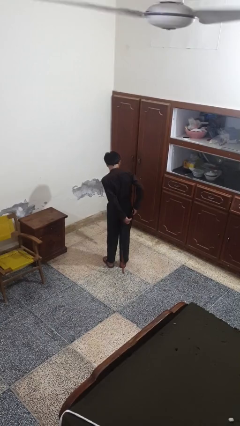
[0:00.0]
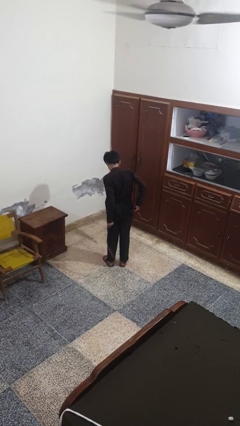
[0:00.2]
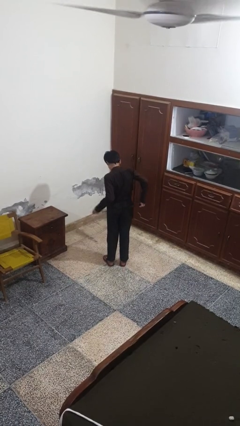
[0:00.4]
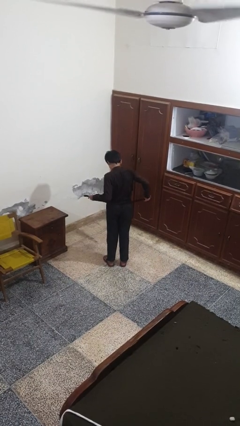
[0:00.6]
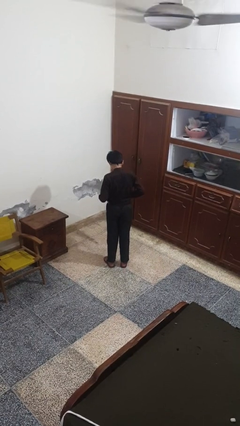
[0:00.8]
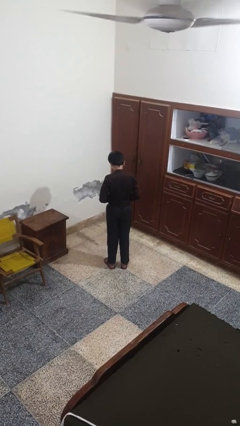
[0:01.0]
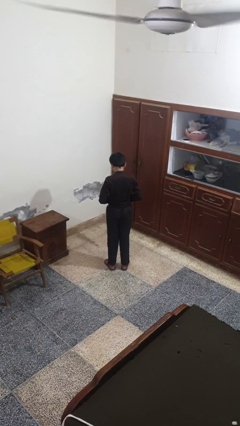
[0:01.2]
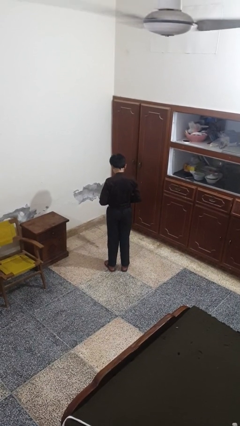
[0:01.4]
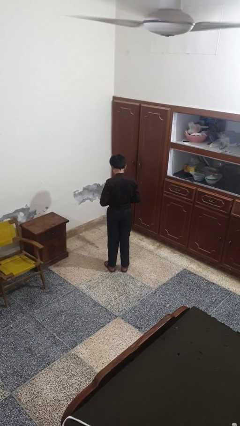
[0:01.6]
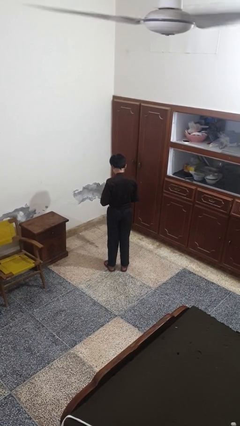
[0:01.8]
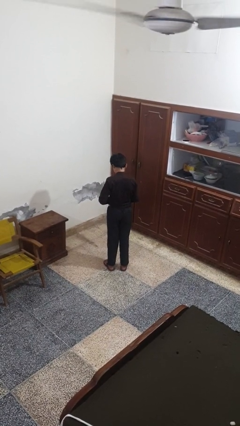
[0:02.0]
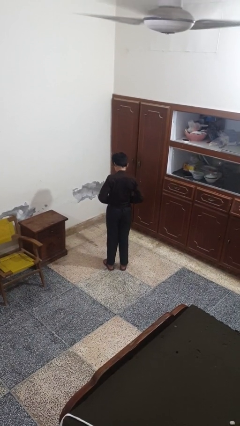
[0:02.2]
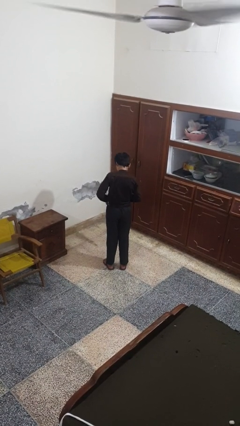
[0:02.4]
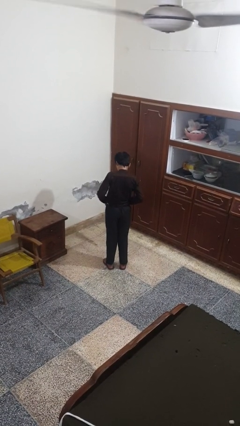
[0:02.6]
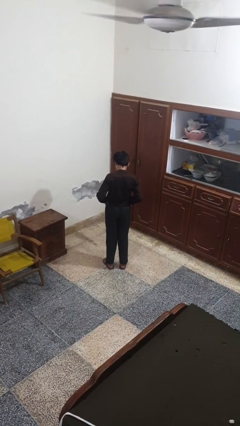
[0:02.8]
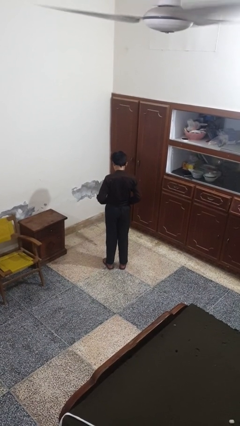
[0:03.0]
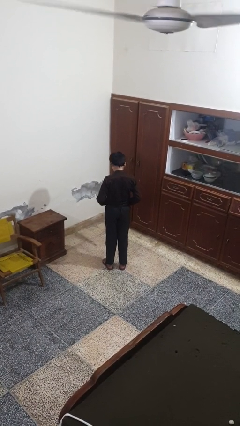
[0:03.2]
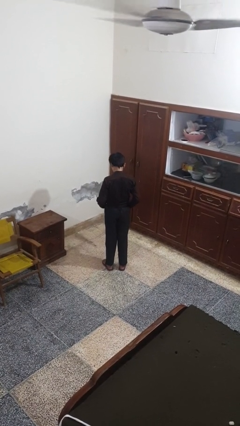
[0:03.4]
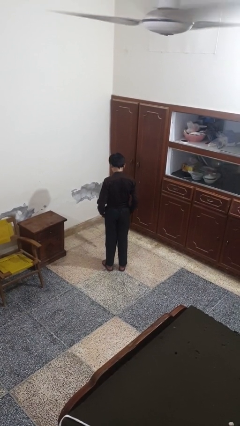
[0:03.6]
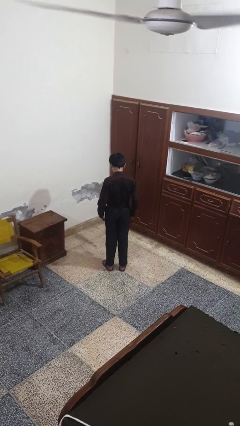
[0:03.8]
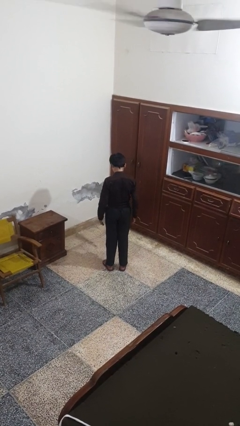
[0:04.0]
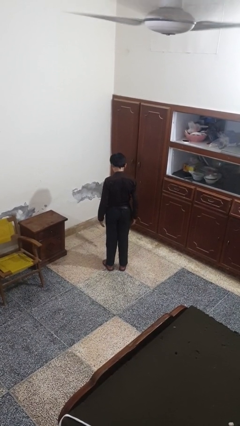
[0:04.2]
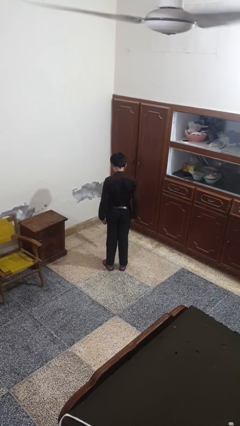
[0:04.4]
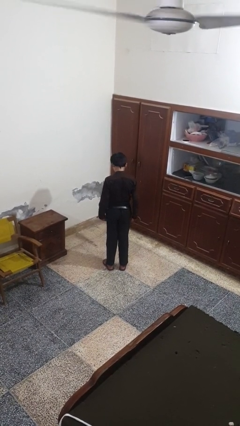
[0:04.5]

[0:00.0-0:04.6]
person puts on belt

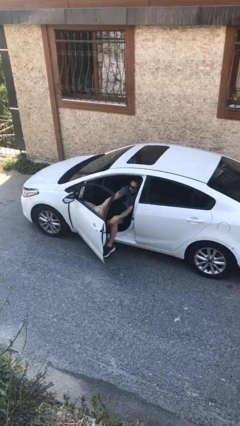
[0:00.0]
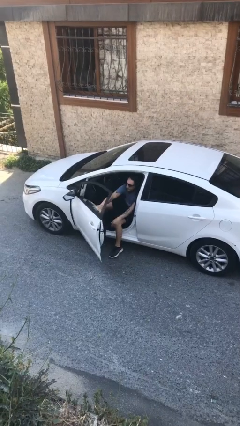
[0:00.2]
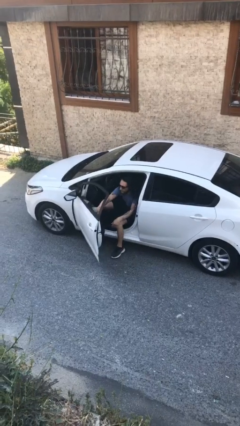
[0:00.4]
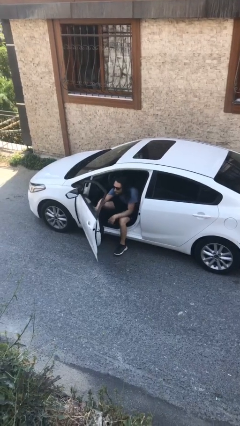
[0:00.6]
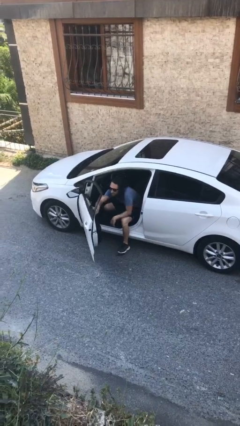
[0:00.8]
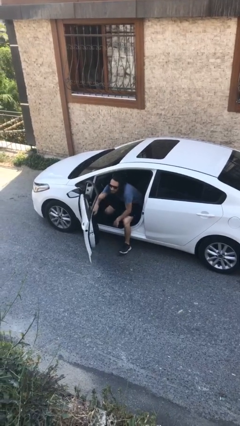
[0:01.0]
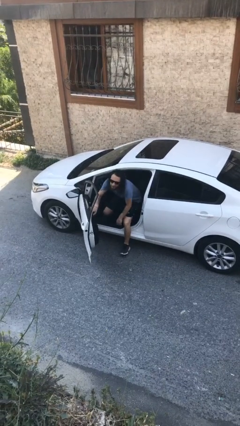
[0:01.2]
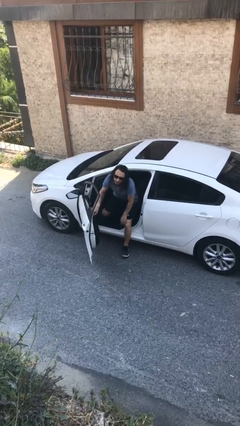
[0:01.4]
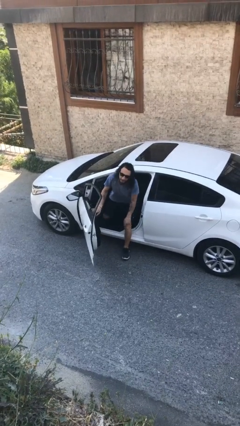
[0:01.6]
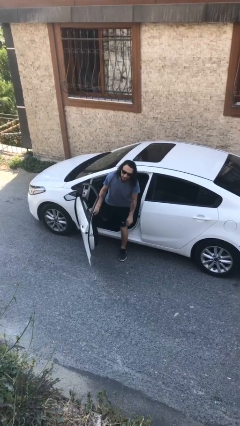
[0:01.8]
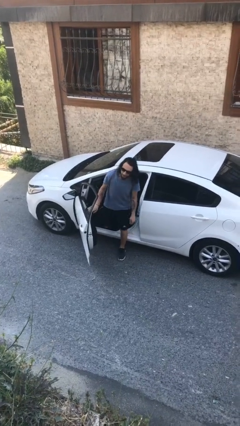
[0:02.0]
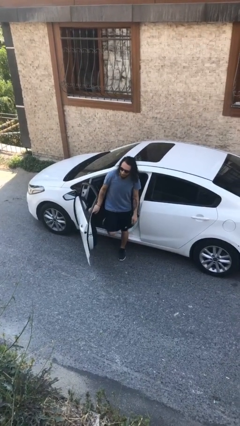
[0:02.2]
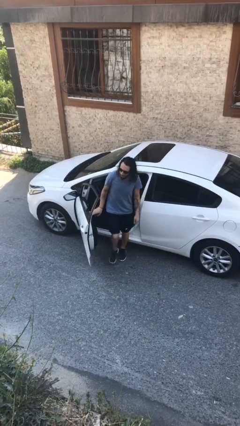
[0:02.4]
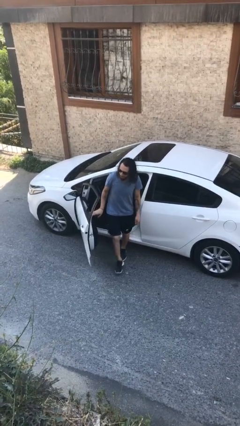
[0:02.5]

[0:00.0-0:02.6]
person exits car

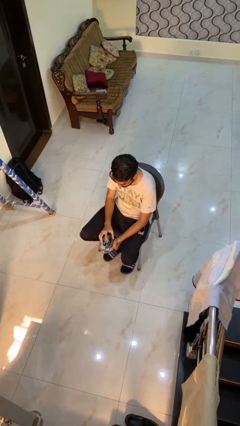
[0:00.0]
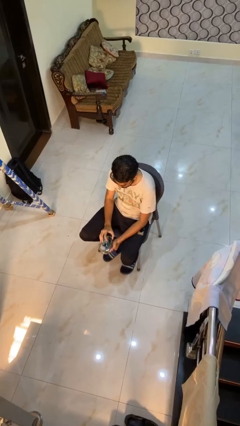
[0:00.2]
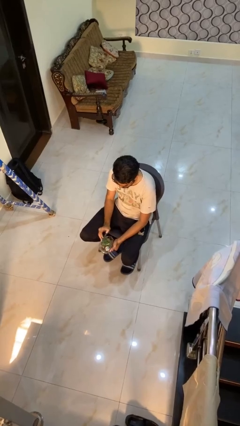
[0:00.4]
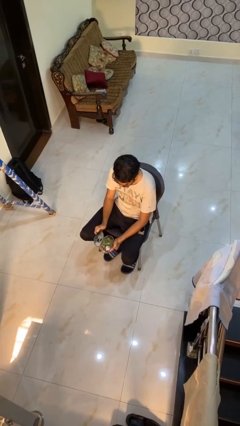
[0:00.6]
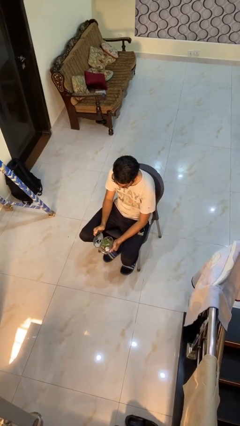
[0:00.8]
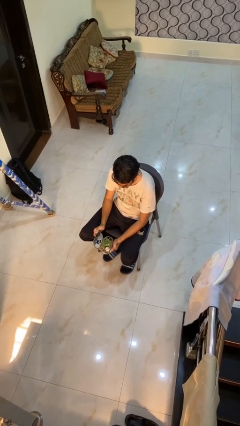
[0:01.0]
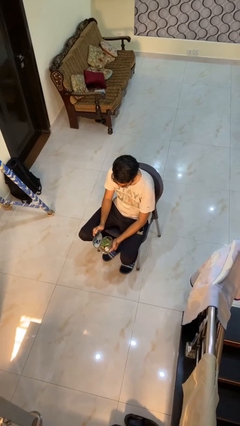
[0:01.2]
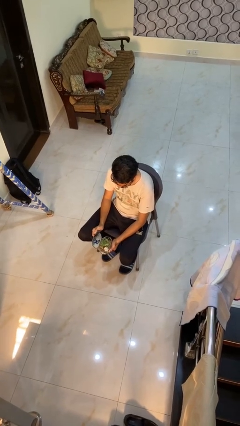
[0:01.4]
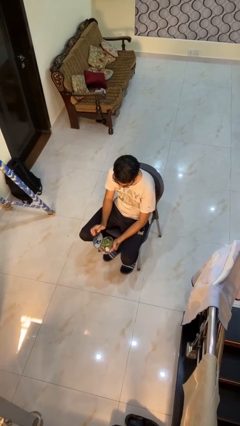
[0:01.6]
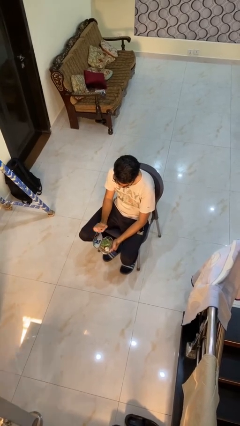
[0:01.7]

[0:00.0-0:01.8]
person opens jewelry box

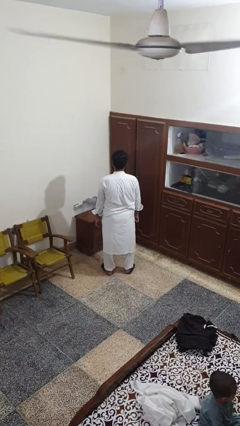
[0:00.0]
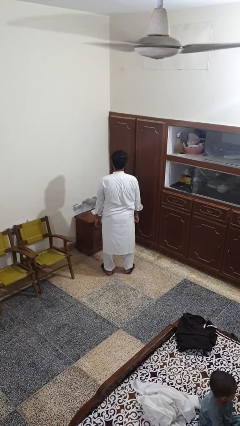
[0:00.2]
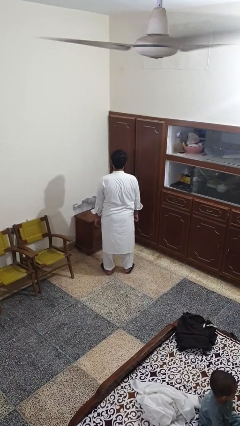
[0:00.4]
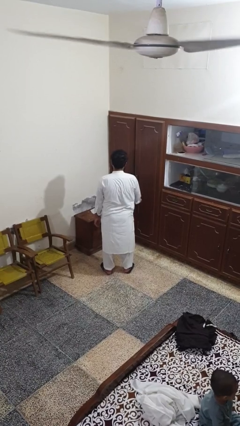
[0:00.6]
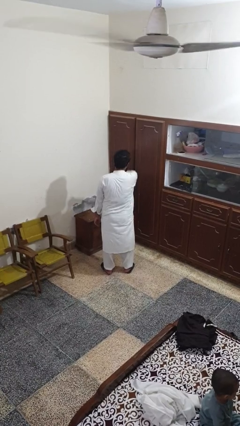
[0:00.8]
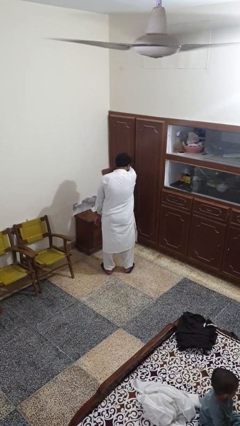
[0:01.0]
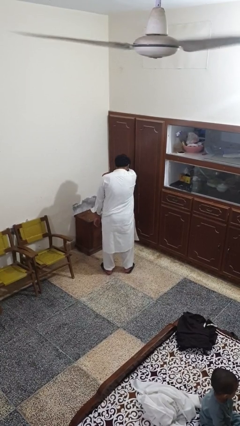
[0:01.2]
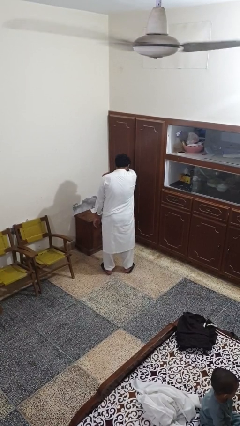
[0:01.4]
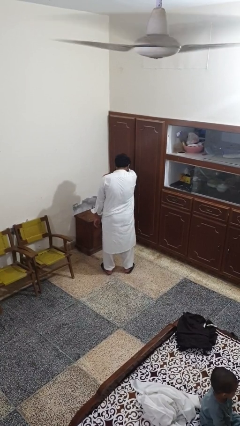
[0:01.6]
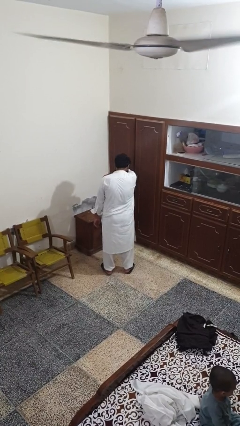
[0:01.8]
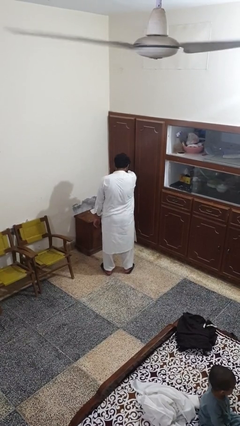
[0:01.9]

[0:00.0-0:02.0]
person sneezes into arm

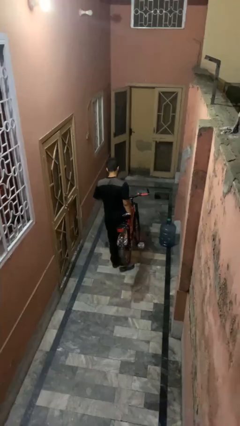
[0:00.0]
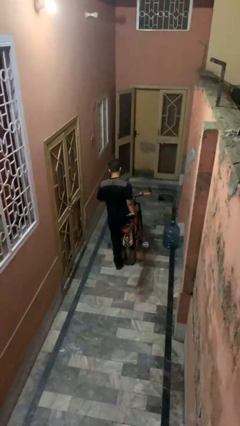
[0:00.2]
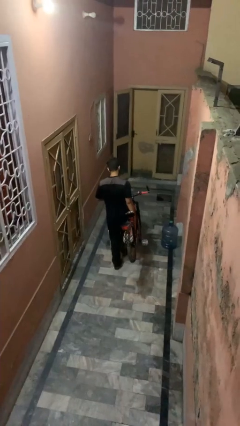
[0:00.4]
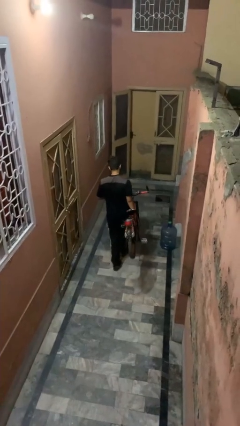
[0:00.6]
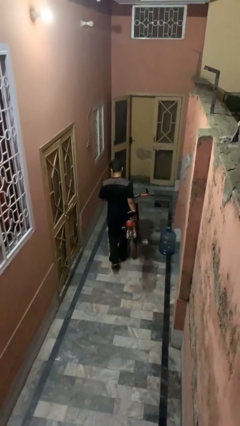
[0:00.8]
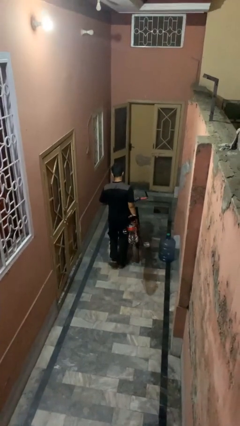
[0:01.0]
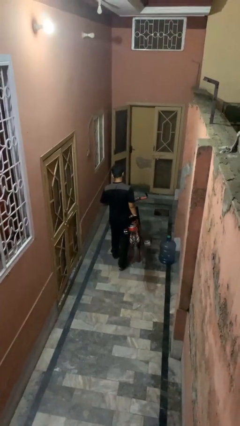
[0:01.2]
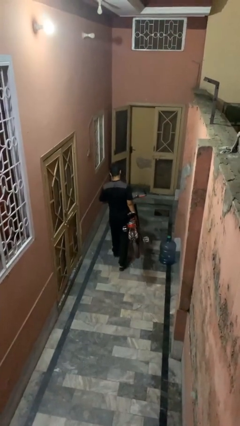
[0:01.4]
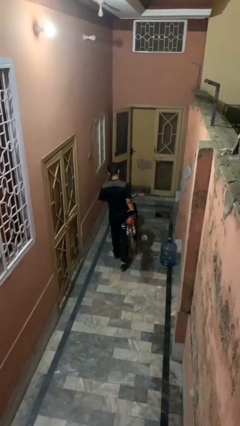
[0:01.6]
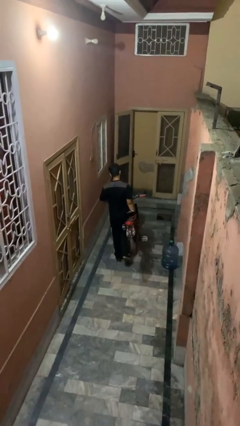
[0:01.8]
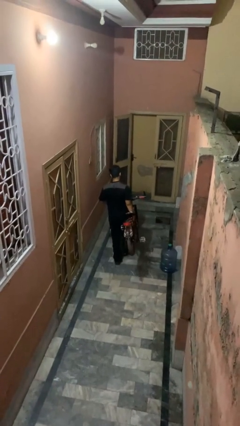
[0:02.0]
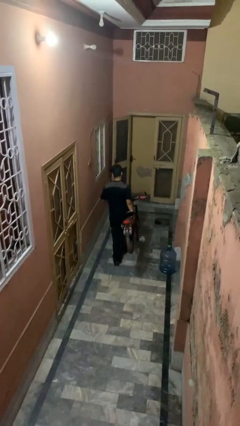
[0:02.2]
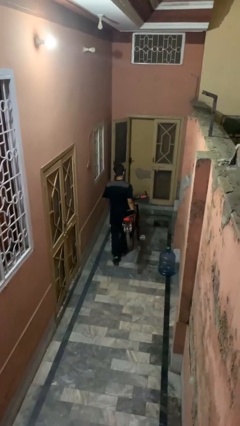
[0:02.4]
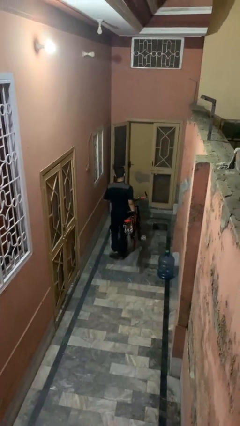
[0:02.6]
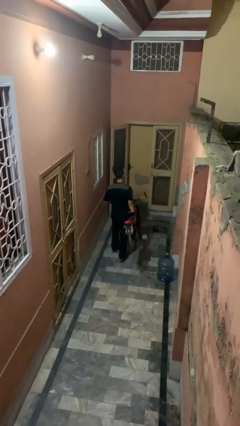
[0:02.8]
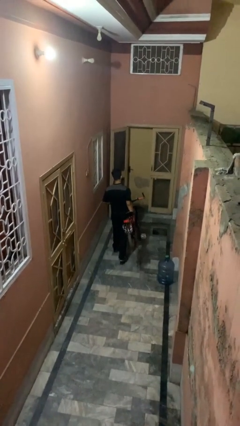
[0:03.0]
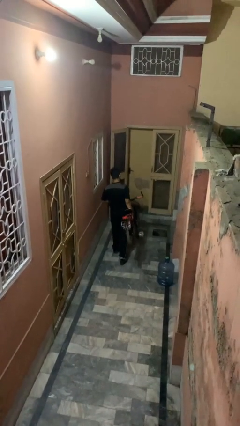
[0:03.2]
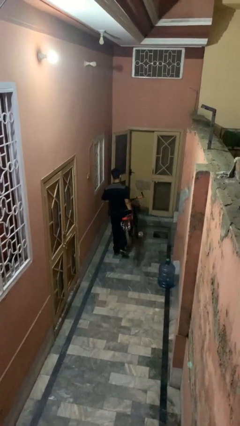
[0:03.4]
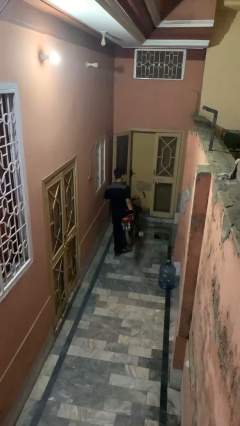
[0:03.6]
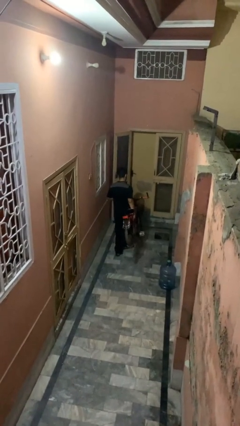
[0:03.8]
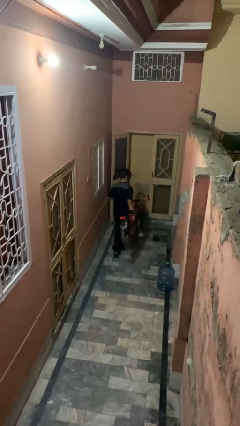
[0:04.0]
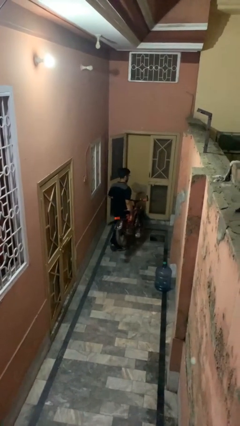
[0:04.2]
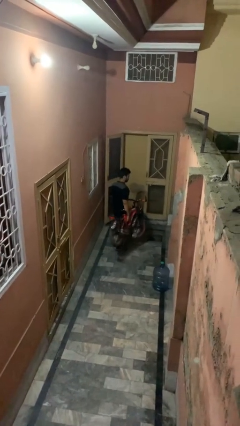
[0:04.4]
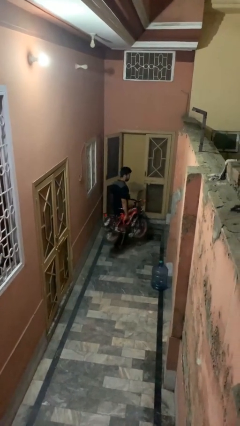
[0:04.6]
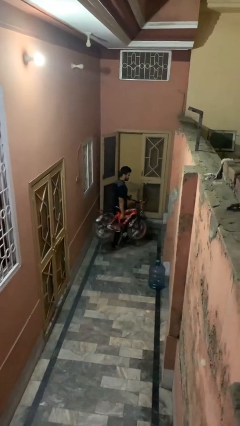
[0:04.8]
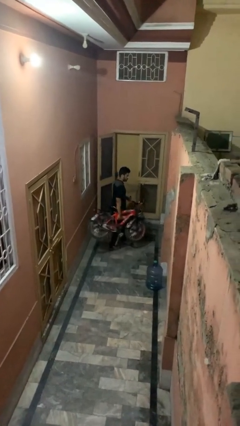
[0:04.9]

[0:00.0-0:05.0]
person carries bicycle

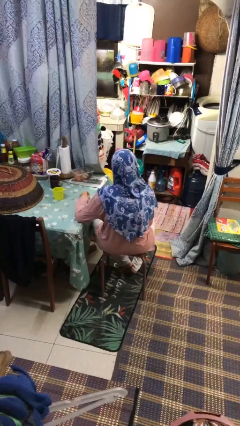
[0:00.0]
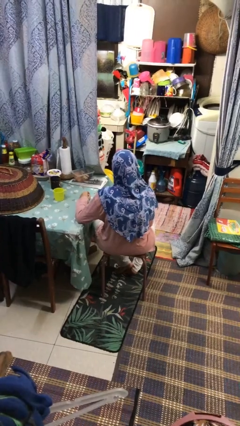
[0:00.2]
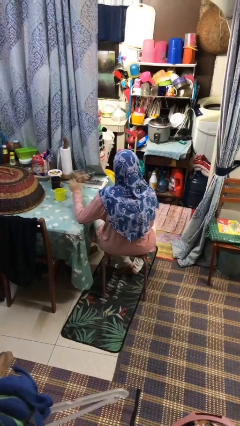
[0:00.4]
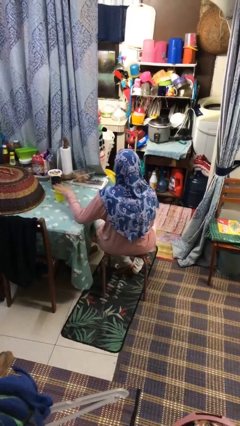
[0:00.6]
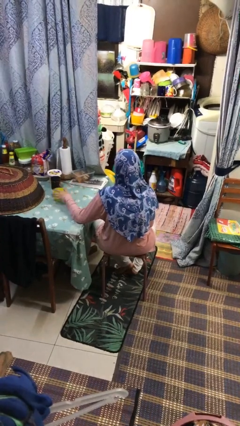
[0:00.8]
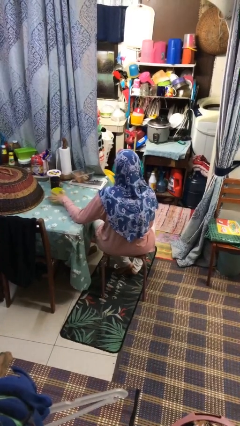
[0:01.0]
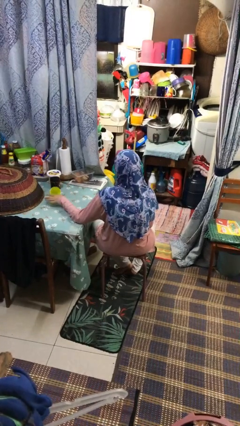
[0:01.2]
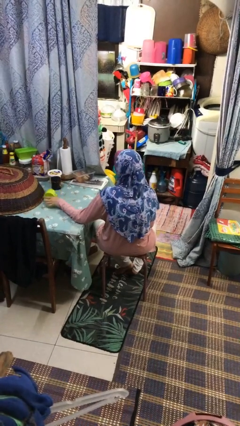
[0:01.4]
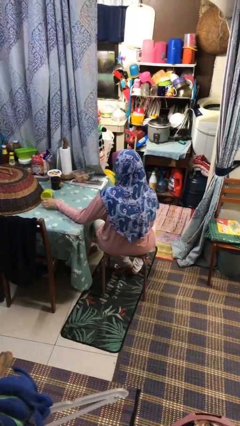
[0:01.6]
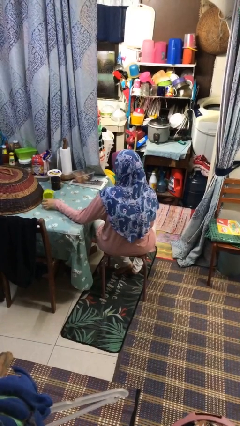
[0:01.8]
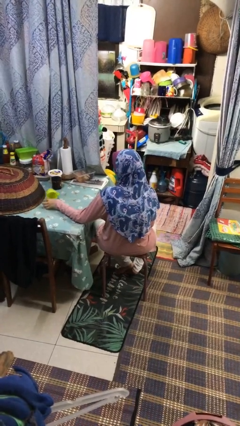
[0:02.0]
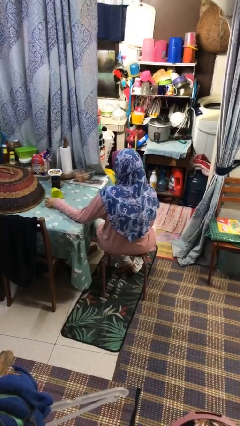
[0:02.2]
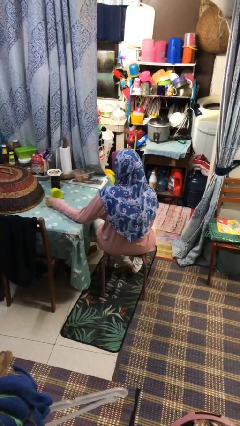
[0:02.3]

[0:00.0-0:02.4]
person knocks over glass
